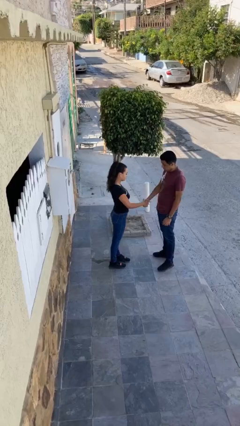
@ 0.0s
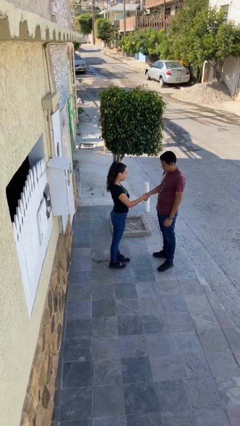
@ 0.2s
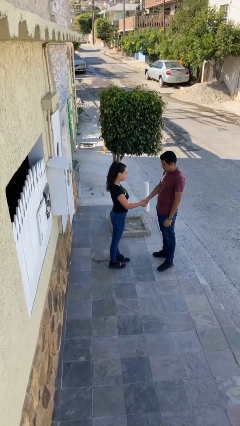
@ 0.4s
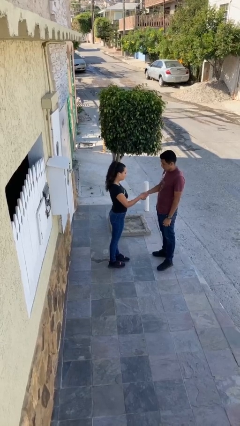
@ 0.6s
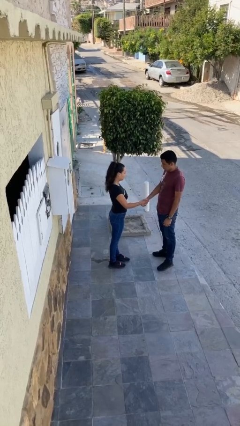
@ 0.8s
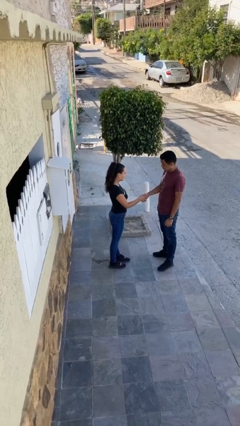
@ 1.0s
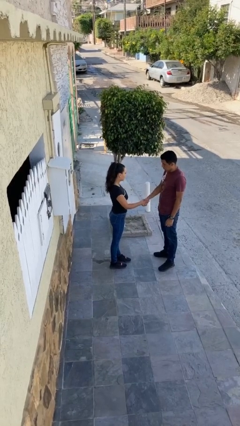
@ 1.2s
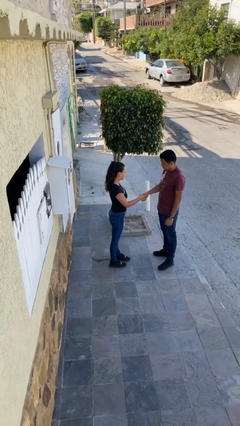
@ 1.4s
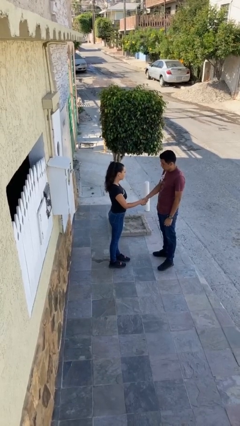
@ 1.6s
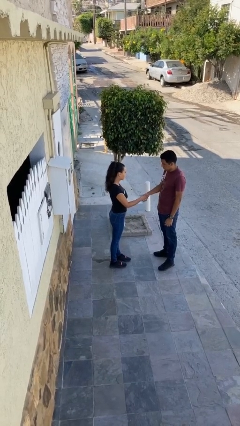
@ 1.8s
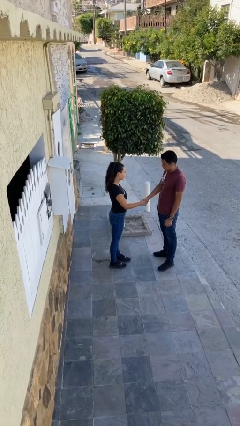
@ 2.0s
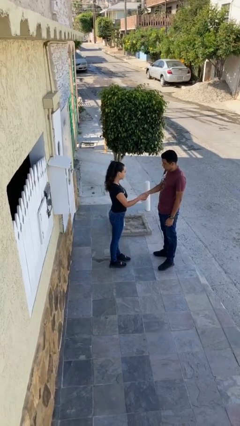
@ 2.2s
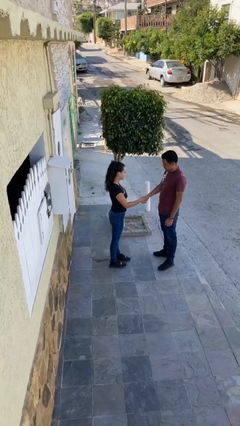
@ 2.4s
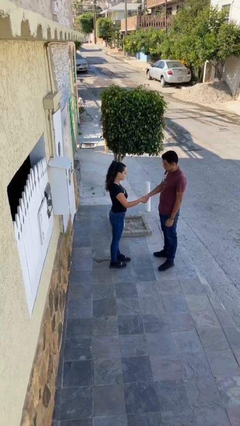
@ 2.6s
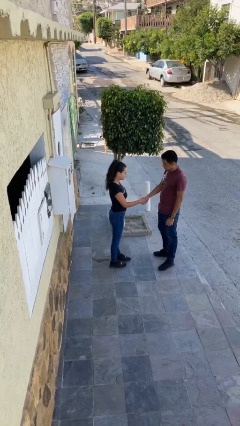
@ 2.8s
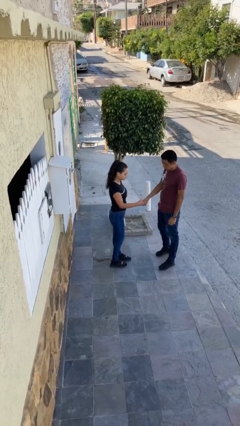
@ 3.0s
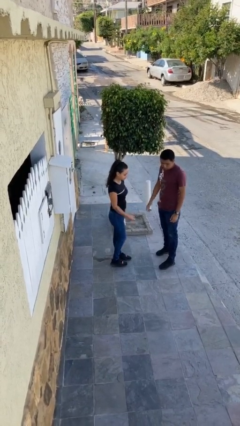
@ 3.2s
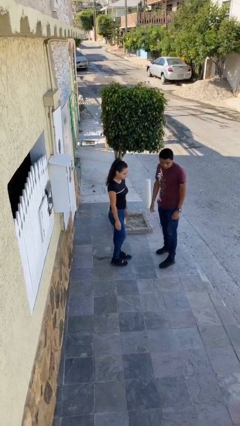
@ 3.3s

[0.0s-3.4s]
person shakes hand

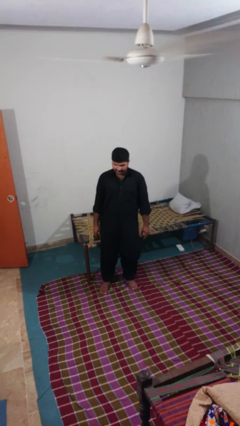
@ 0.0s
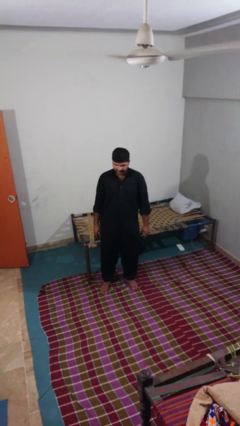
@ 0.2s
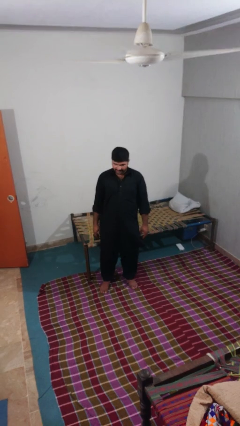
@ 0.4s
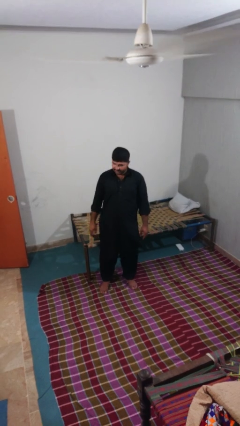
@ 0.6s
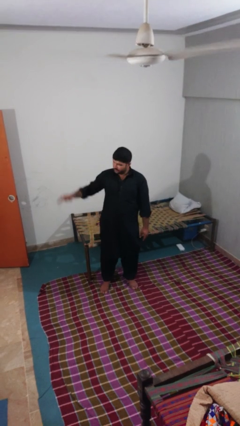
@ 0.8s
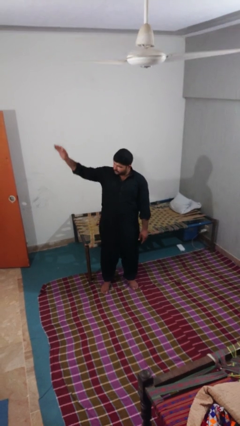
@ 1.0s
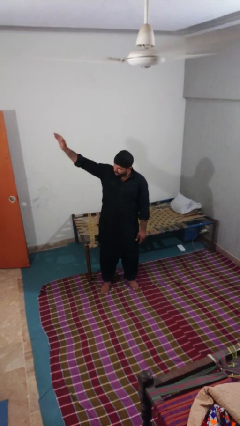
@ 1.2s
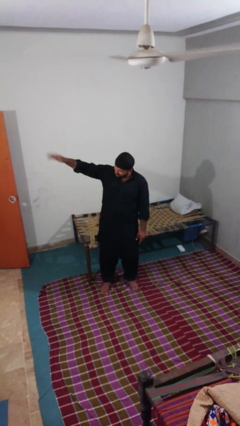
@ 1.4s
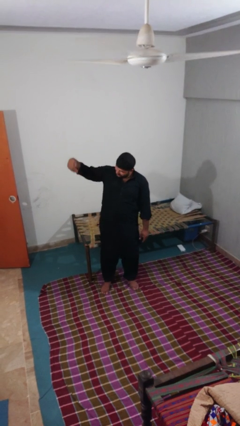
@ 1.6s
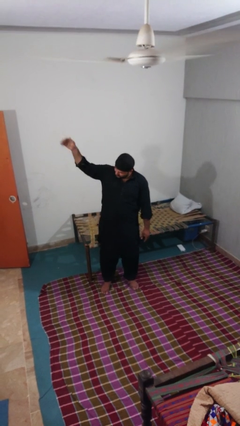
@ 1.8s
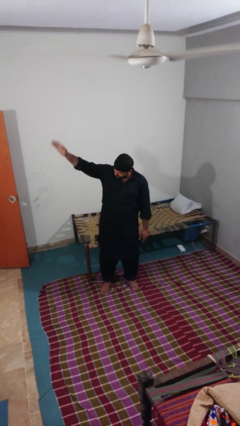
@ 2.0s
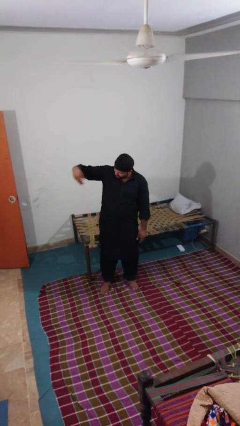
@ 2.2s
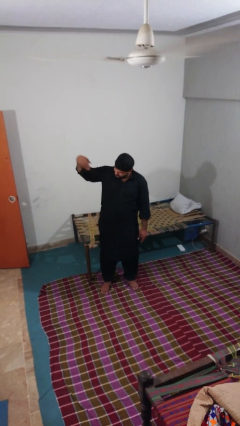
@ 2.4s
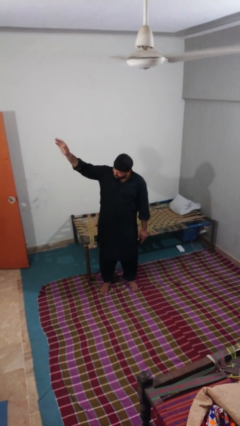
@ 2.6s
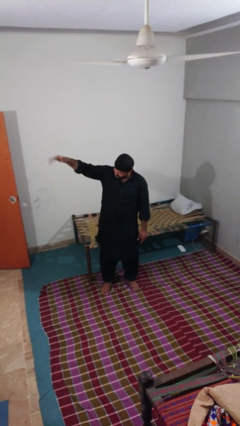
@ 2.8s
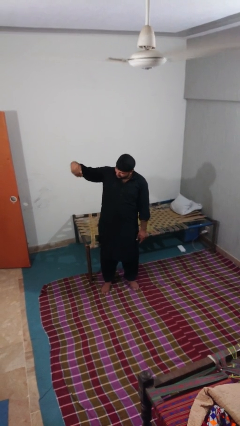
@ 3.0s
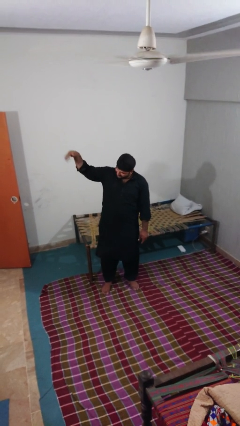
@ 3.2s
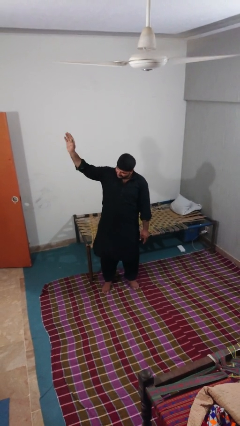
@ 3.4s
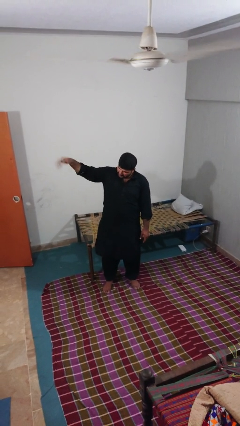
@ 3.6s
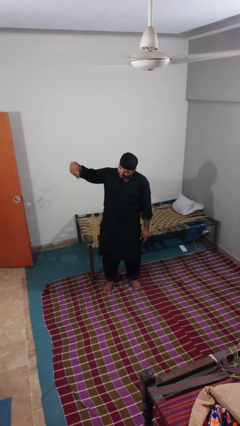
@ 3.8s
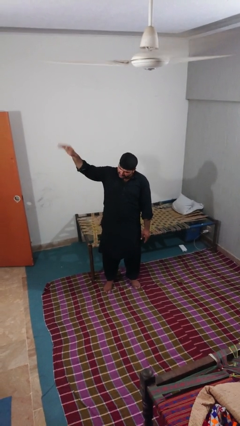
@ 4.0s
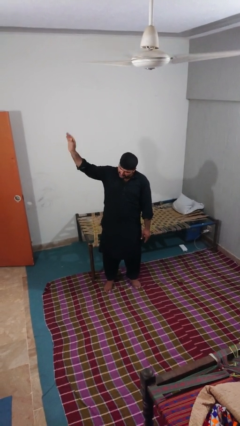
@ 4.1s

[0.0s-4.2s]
person gestures come here

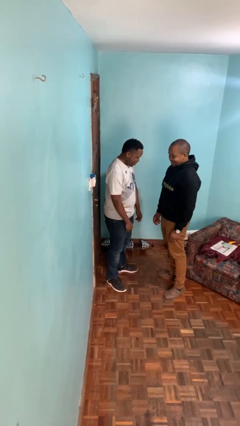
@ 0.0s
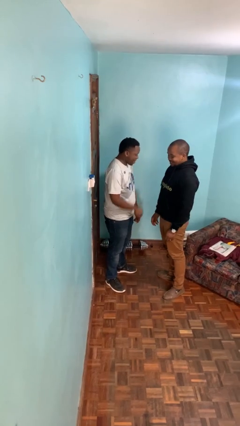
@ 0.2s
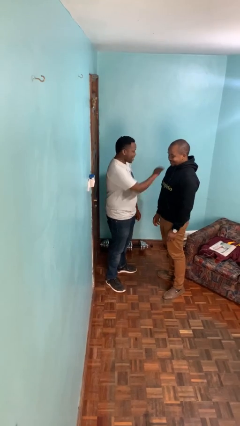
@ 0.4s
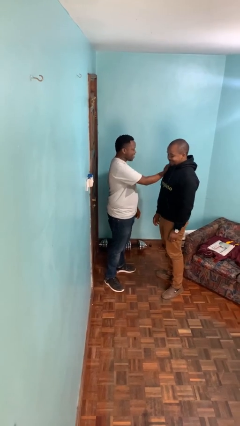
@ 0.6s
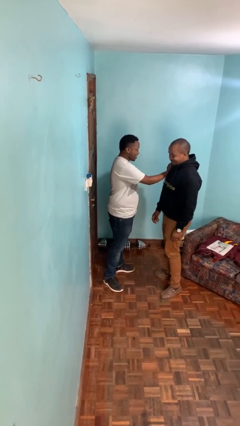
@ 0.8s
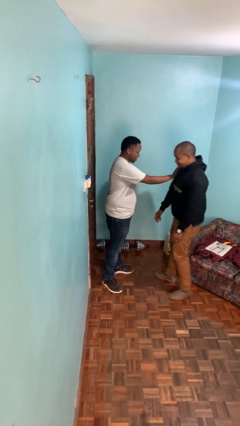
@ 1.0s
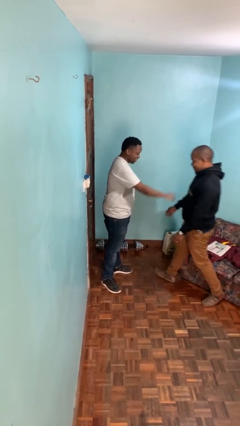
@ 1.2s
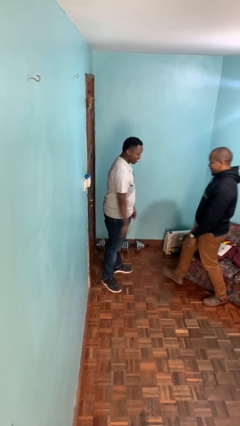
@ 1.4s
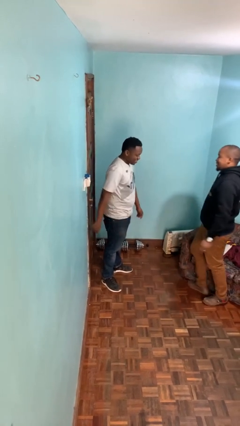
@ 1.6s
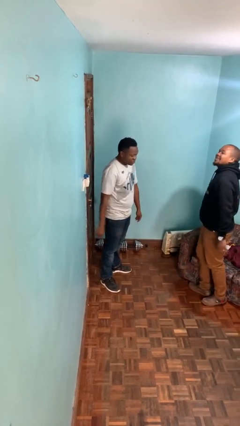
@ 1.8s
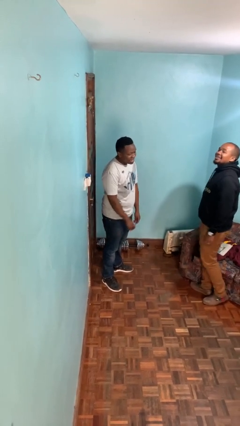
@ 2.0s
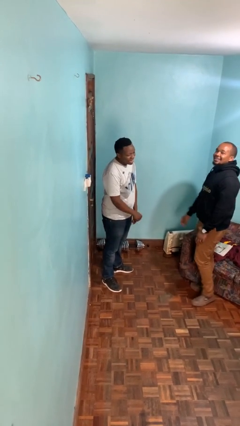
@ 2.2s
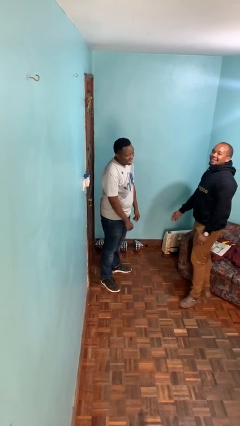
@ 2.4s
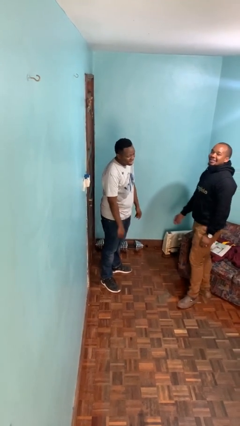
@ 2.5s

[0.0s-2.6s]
person shoves person

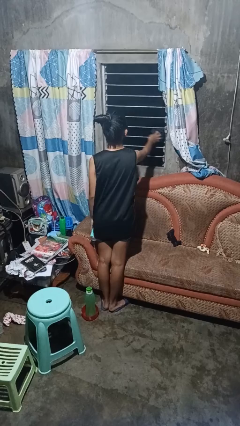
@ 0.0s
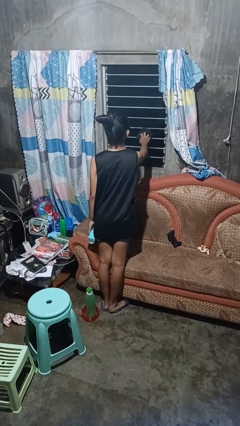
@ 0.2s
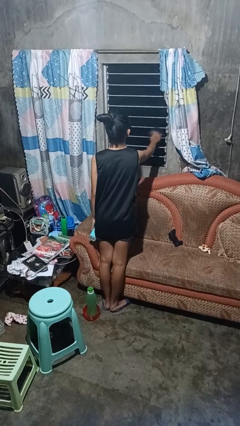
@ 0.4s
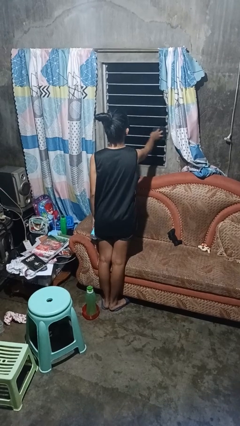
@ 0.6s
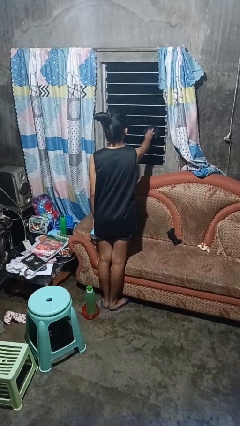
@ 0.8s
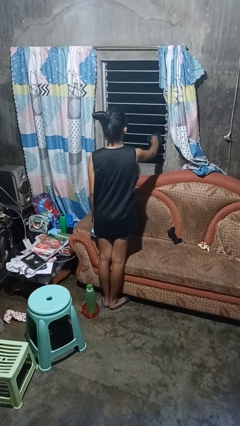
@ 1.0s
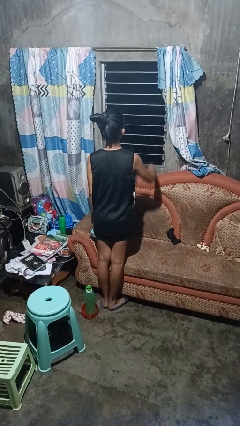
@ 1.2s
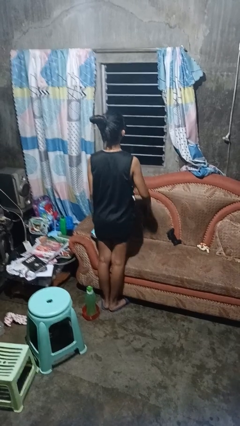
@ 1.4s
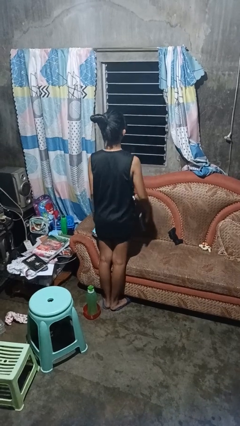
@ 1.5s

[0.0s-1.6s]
person washes window

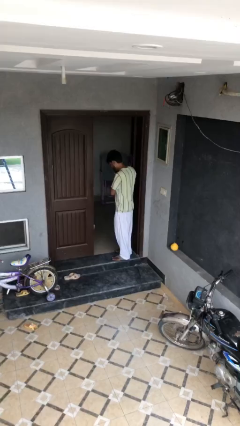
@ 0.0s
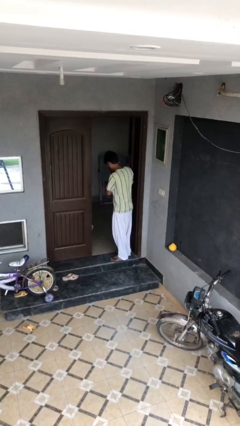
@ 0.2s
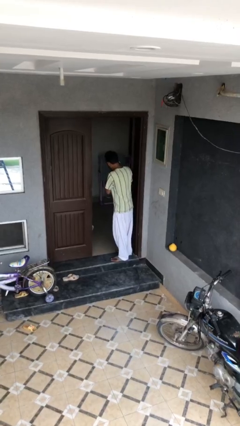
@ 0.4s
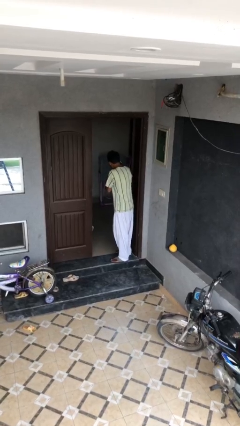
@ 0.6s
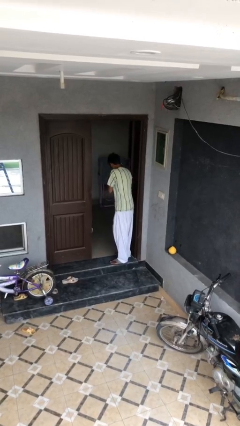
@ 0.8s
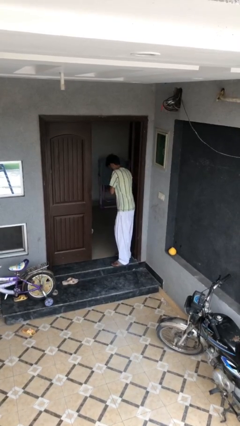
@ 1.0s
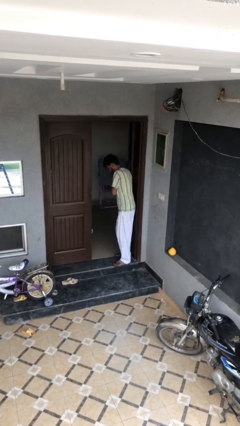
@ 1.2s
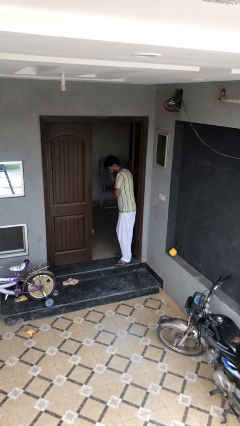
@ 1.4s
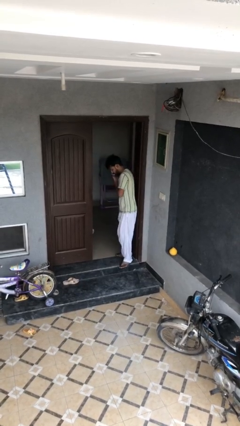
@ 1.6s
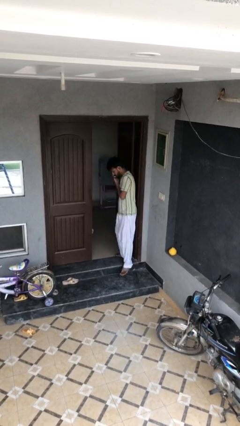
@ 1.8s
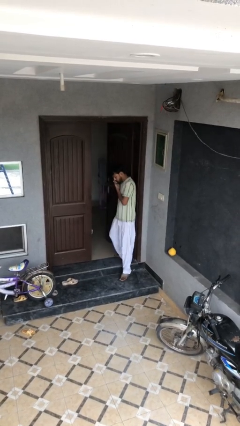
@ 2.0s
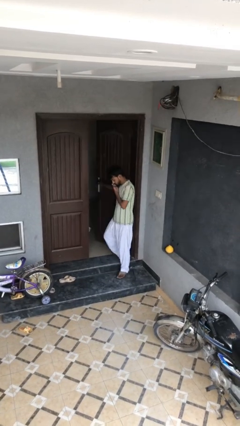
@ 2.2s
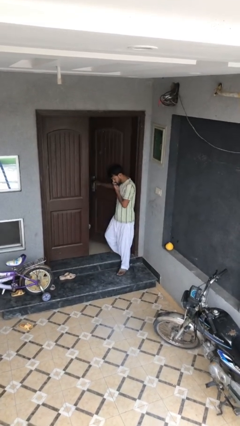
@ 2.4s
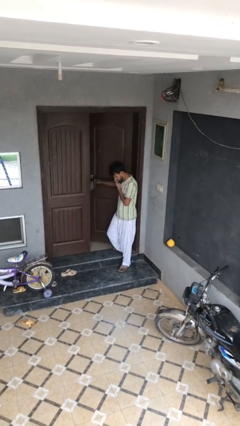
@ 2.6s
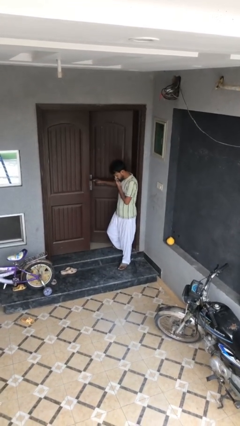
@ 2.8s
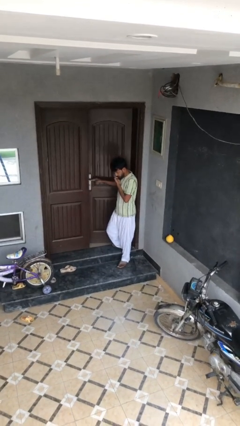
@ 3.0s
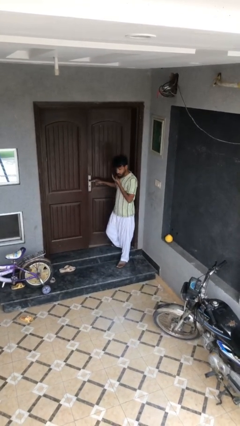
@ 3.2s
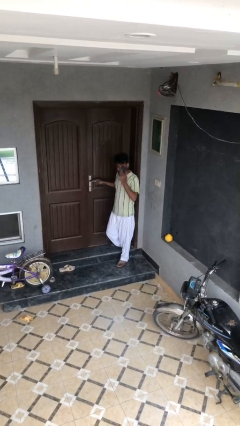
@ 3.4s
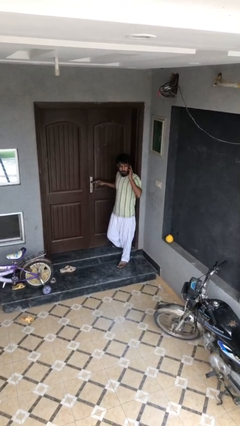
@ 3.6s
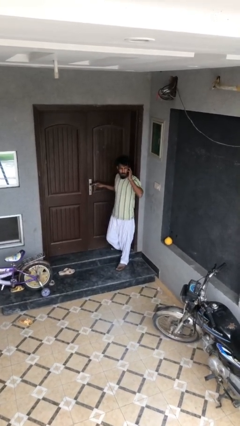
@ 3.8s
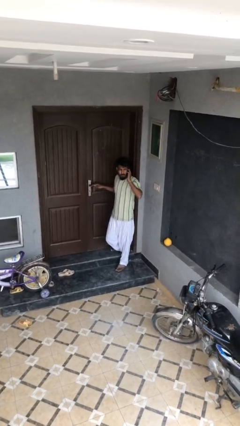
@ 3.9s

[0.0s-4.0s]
person closes facility door

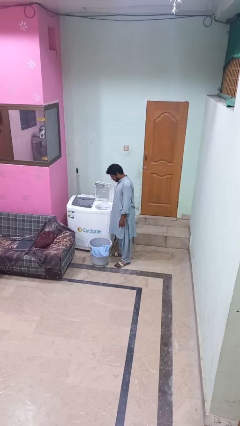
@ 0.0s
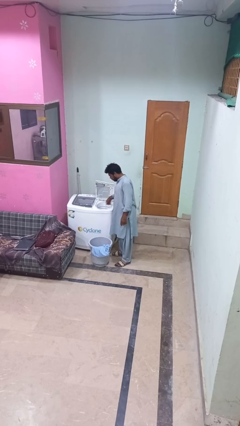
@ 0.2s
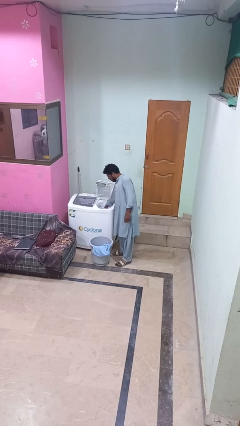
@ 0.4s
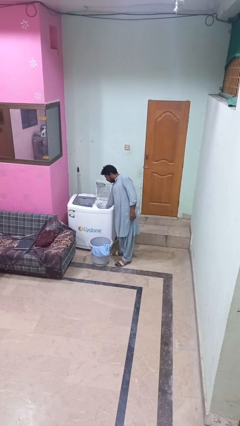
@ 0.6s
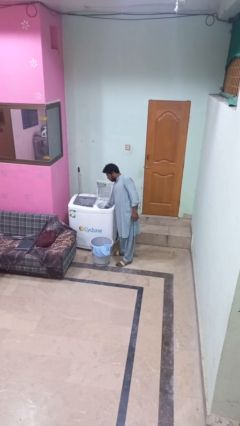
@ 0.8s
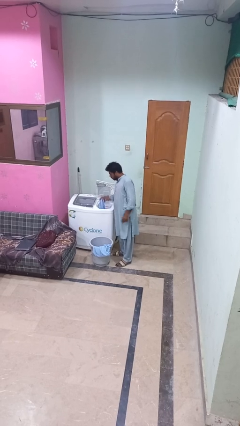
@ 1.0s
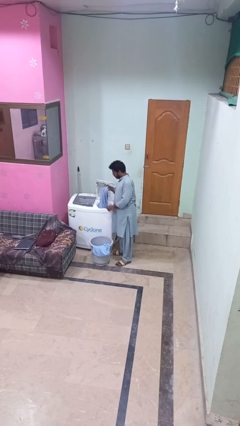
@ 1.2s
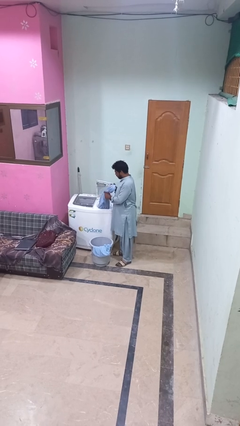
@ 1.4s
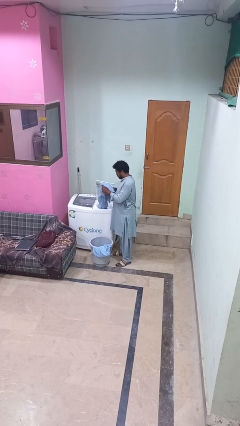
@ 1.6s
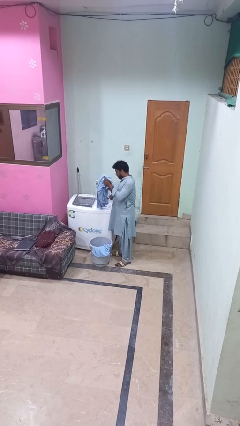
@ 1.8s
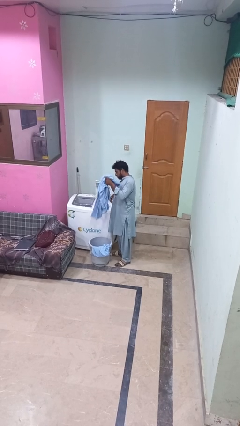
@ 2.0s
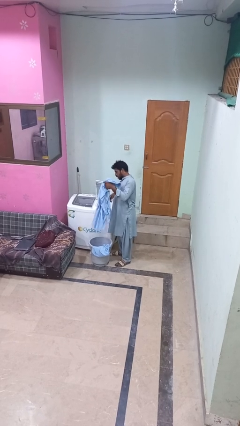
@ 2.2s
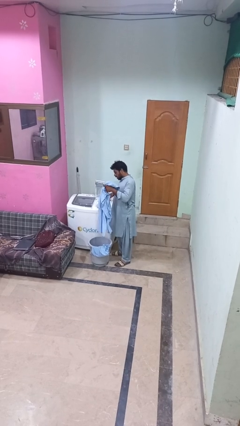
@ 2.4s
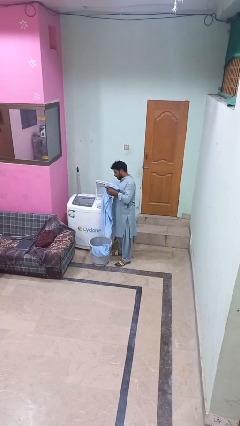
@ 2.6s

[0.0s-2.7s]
person unloads dryer
